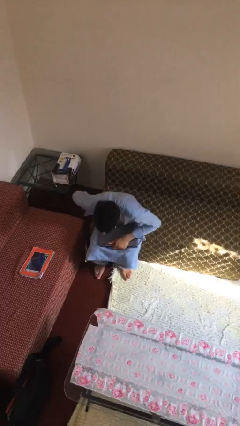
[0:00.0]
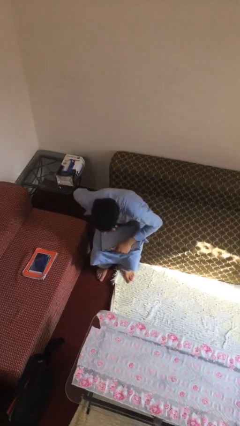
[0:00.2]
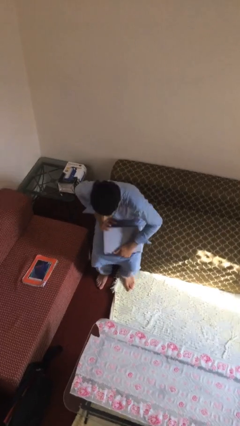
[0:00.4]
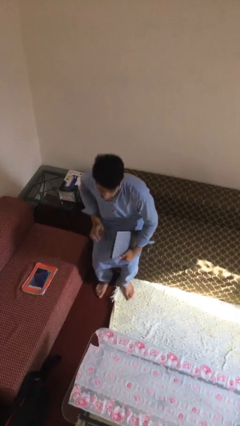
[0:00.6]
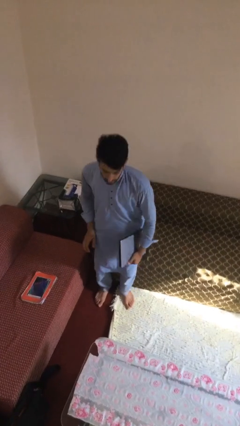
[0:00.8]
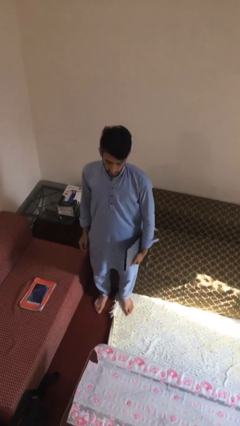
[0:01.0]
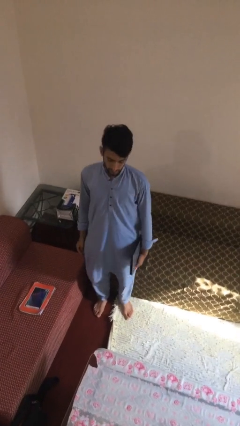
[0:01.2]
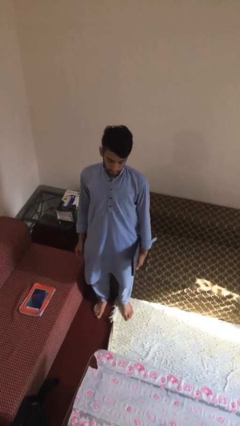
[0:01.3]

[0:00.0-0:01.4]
person stands up

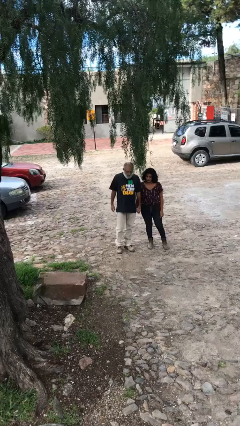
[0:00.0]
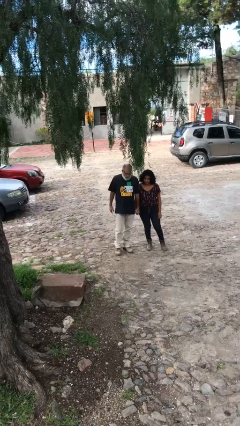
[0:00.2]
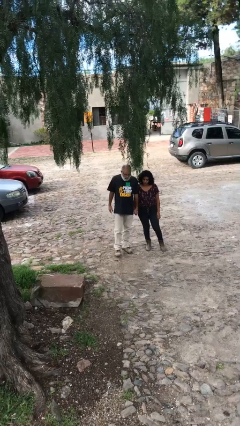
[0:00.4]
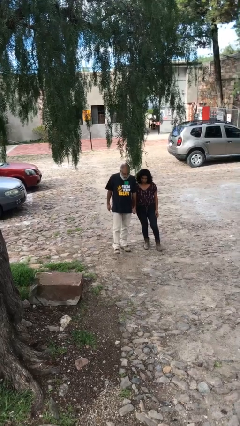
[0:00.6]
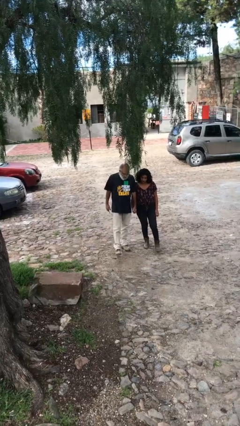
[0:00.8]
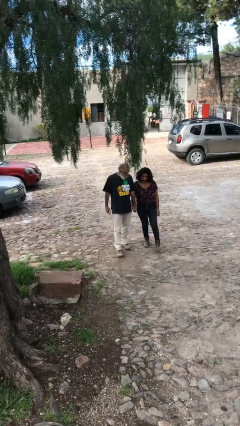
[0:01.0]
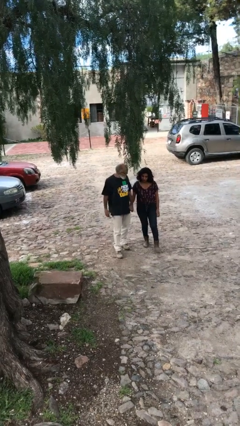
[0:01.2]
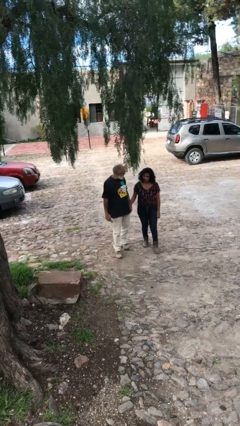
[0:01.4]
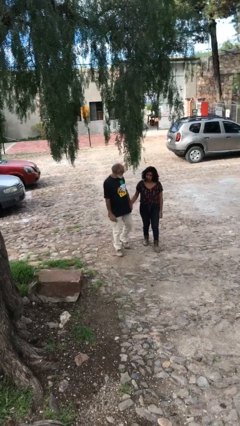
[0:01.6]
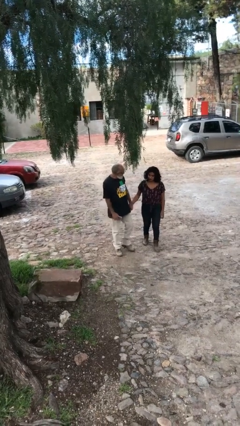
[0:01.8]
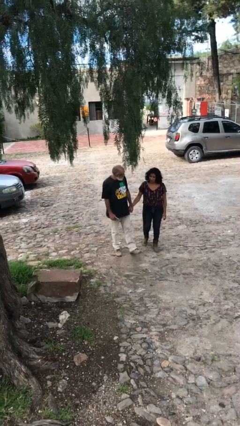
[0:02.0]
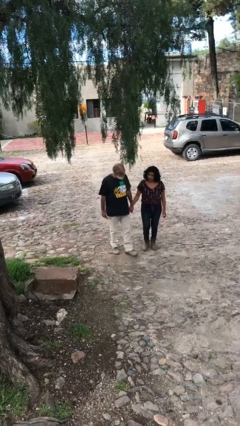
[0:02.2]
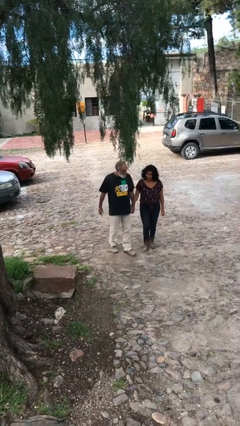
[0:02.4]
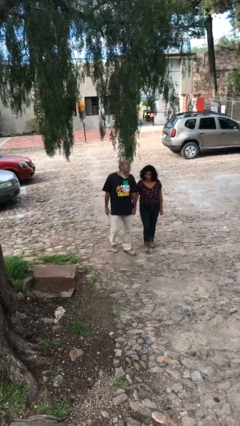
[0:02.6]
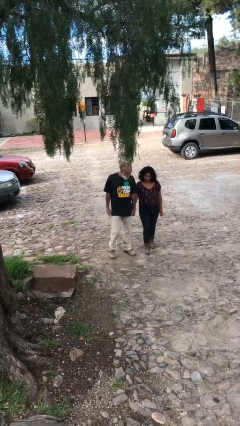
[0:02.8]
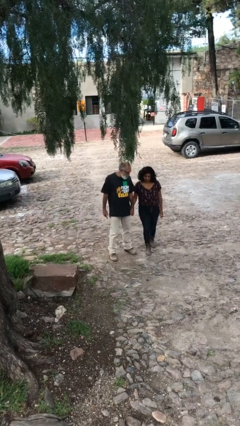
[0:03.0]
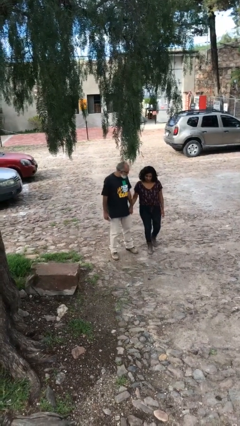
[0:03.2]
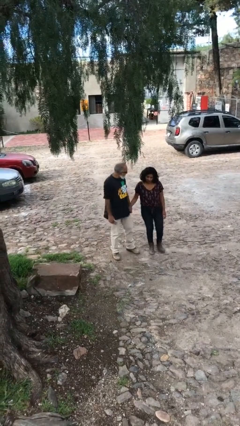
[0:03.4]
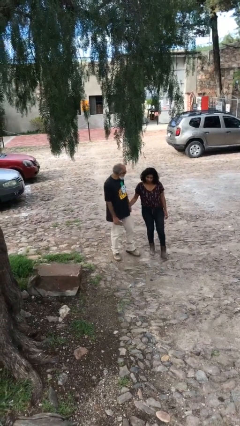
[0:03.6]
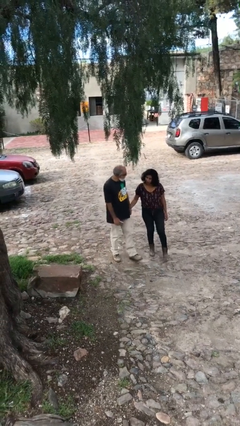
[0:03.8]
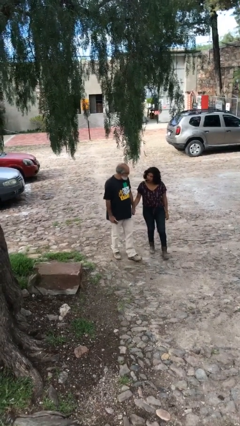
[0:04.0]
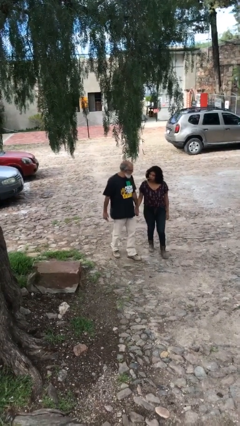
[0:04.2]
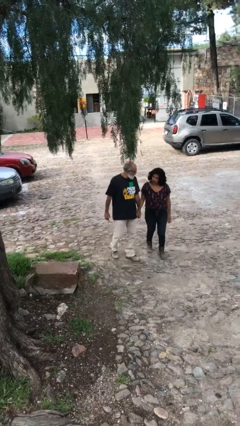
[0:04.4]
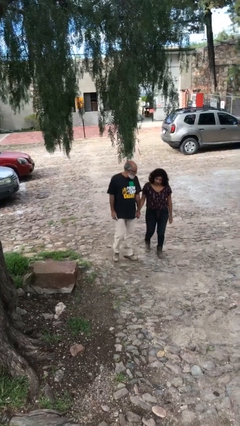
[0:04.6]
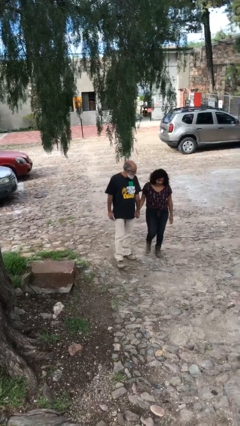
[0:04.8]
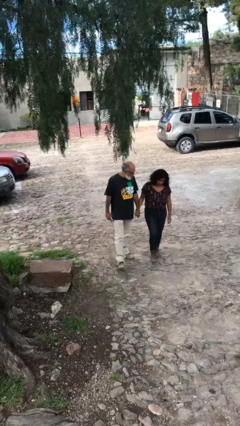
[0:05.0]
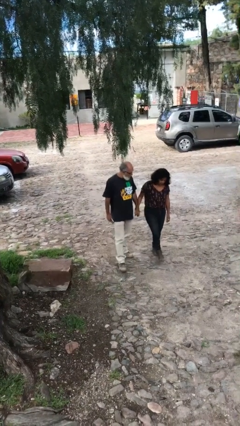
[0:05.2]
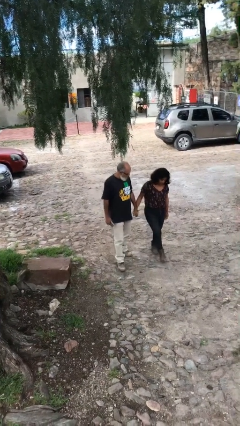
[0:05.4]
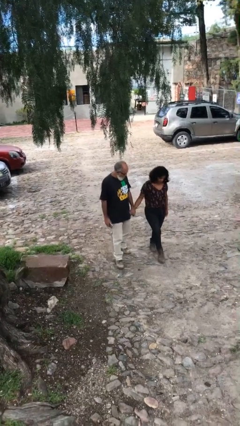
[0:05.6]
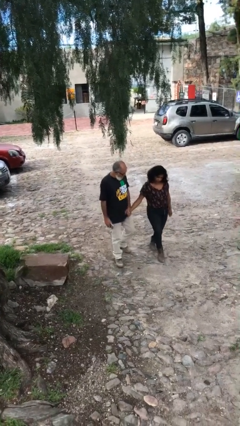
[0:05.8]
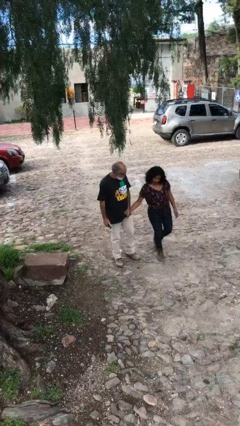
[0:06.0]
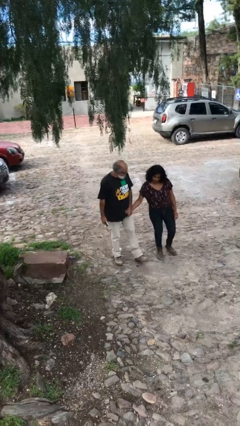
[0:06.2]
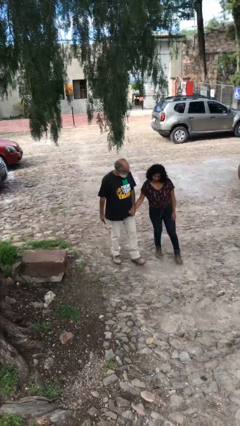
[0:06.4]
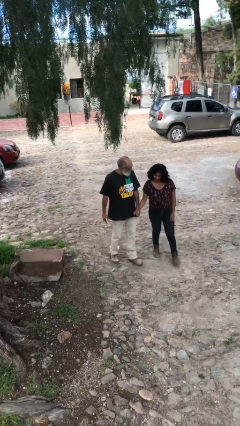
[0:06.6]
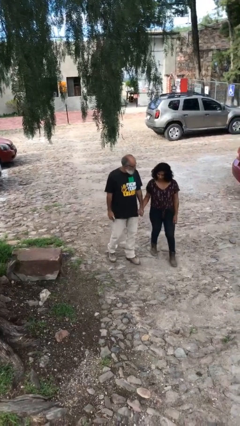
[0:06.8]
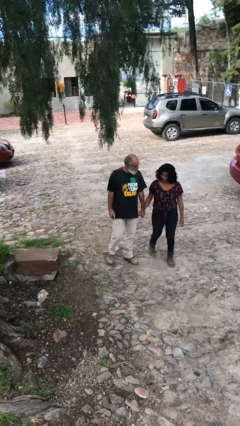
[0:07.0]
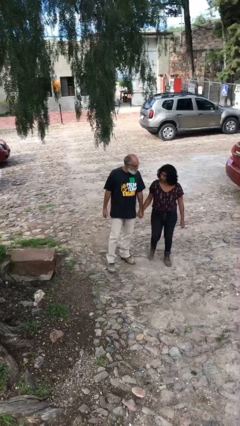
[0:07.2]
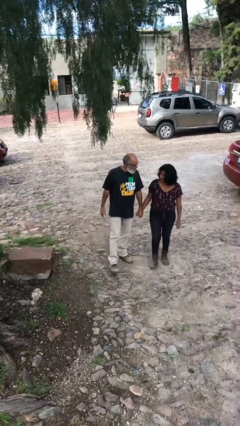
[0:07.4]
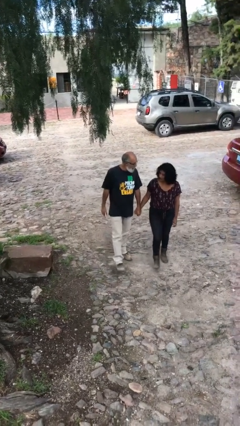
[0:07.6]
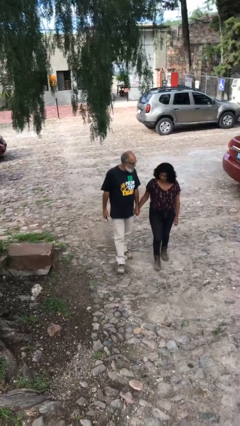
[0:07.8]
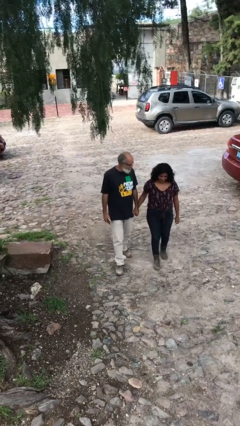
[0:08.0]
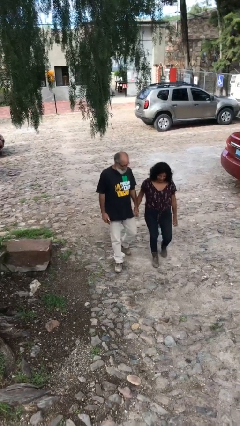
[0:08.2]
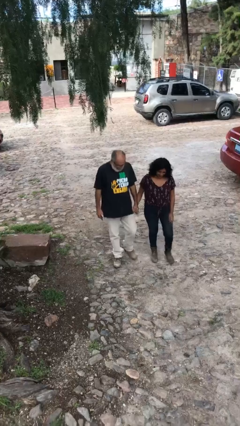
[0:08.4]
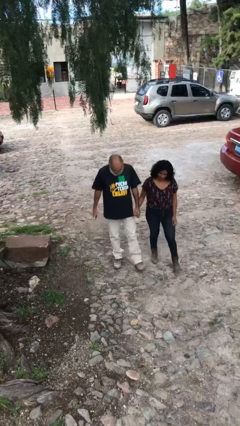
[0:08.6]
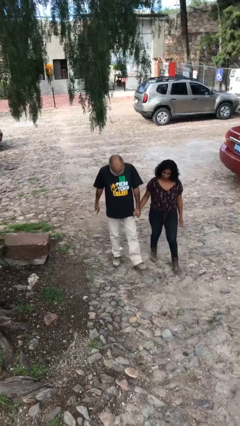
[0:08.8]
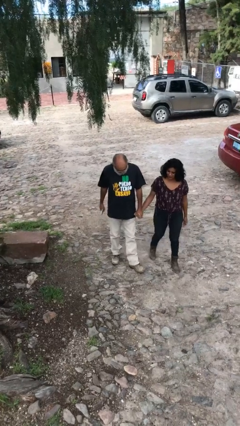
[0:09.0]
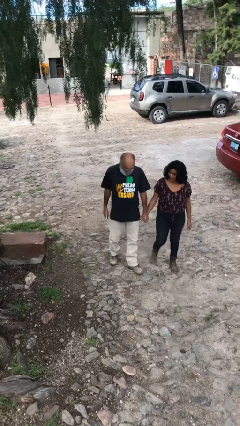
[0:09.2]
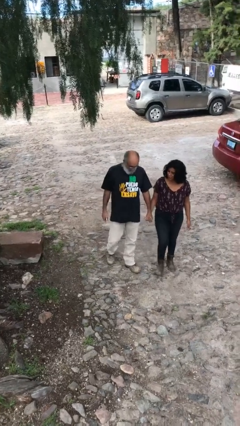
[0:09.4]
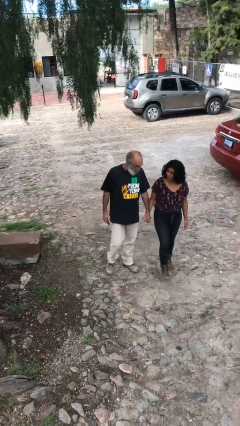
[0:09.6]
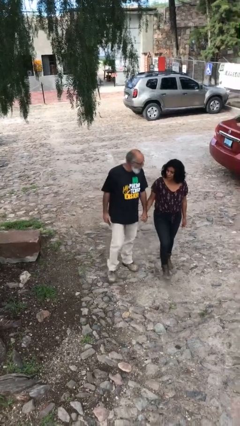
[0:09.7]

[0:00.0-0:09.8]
person holds hand

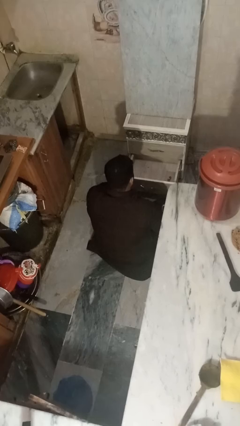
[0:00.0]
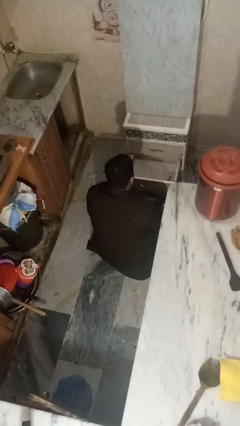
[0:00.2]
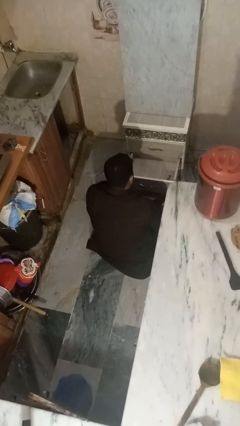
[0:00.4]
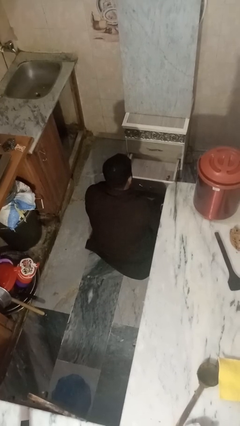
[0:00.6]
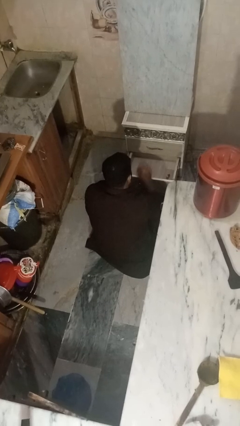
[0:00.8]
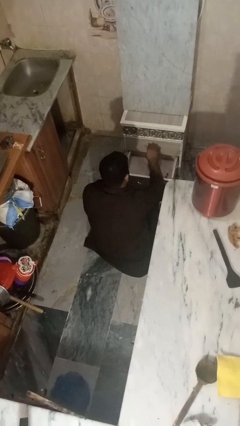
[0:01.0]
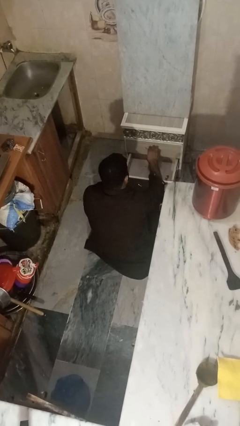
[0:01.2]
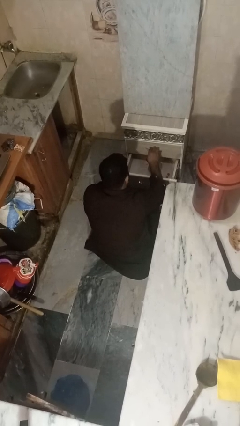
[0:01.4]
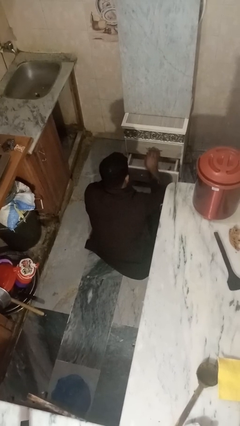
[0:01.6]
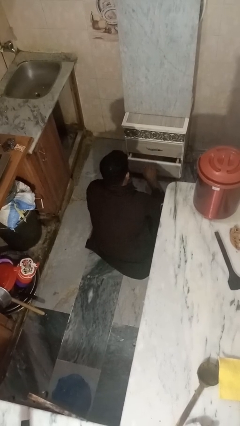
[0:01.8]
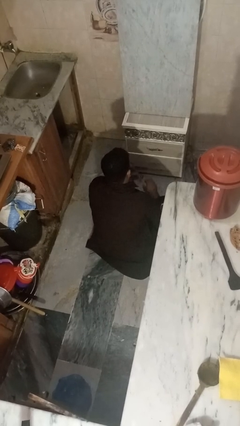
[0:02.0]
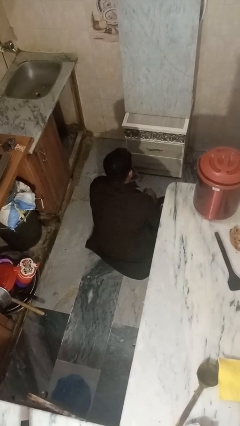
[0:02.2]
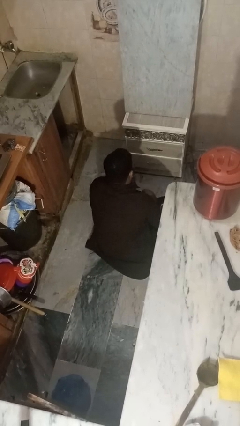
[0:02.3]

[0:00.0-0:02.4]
person closes kitchen drawer

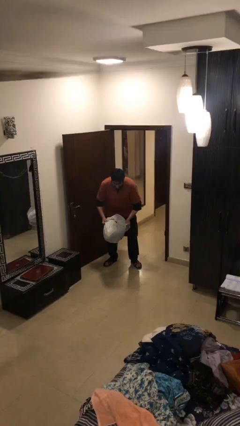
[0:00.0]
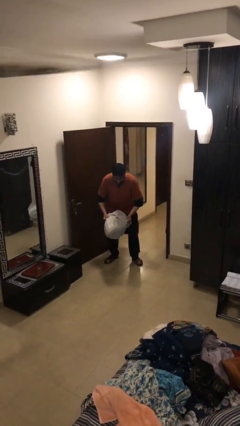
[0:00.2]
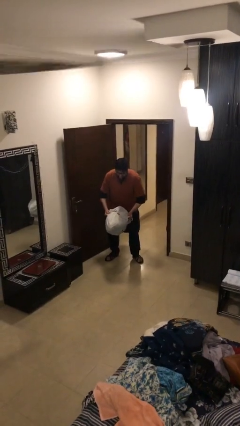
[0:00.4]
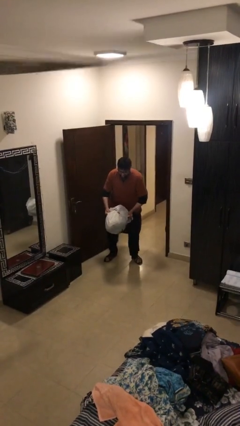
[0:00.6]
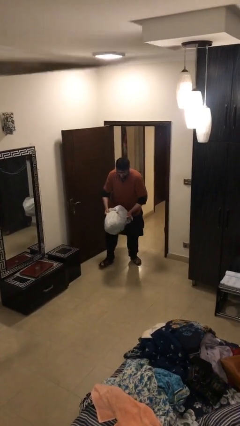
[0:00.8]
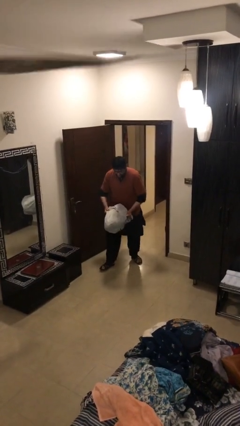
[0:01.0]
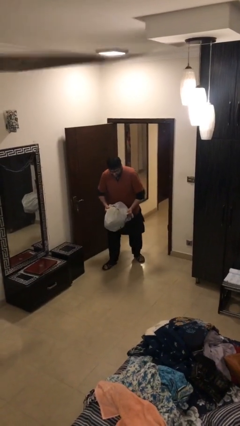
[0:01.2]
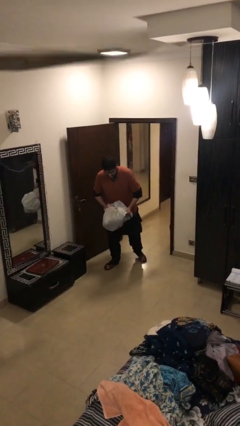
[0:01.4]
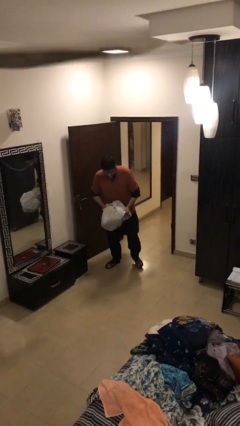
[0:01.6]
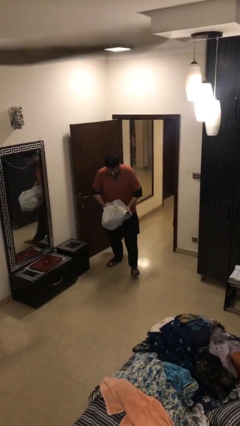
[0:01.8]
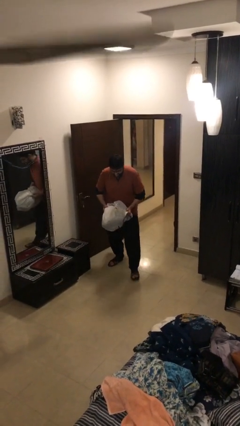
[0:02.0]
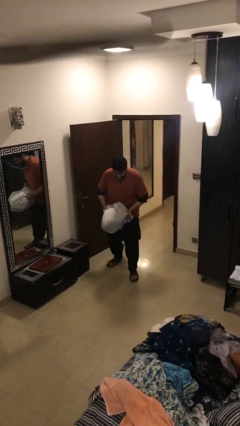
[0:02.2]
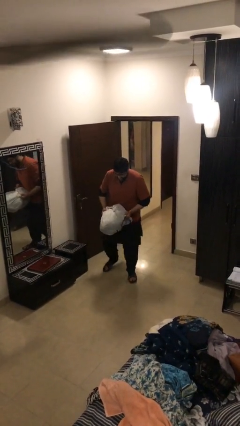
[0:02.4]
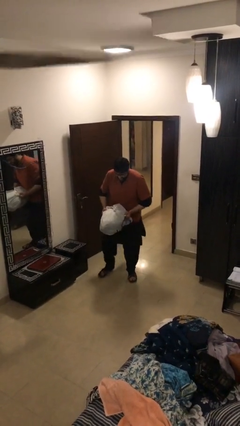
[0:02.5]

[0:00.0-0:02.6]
person carries heavy object

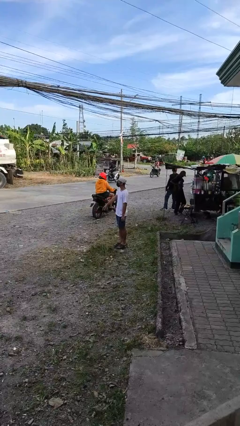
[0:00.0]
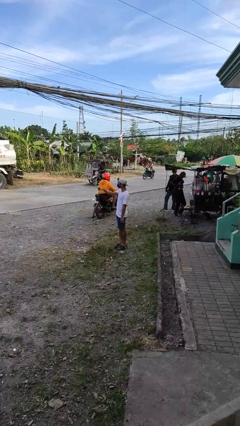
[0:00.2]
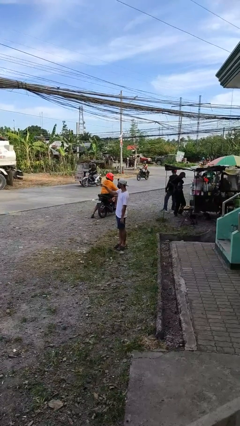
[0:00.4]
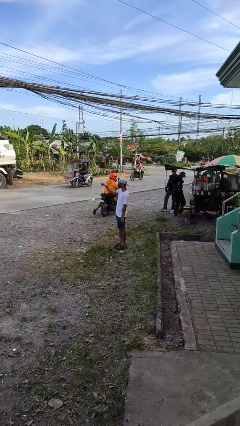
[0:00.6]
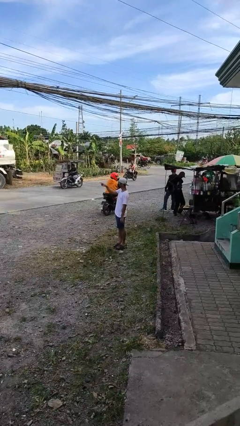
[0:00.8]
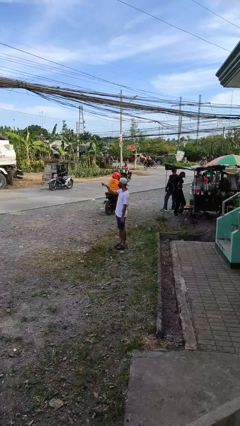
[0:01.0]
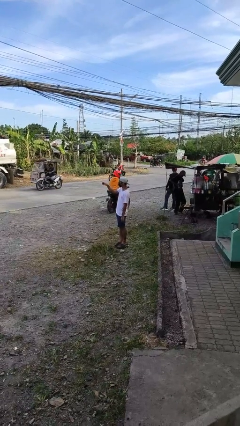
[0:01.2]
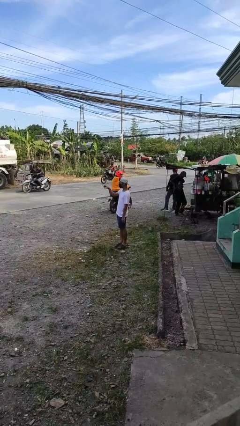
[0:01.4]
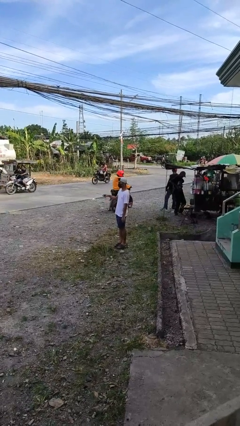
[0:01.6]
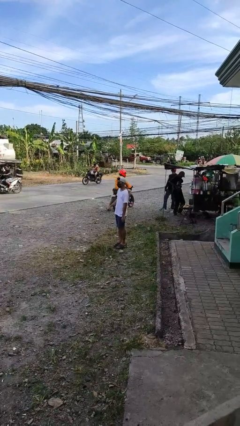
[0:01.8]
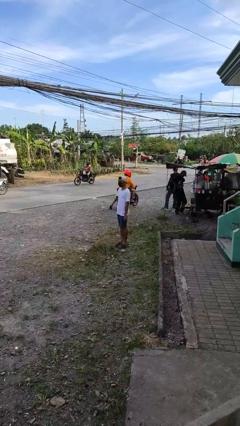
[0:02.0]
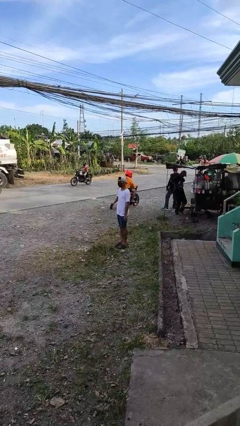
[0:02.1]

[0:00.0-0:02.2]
person points at person
